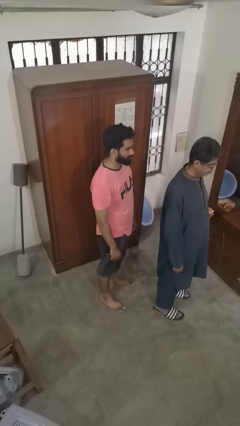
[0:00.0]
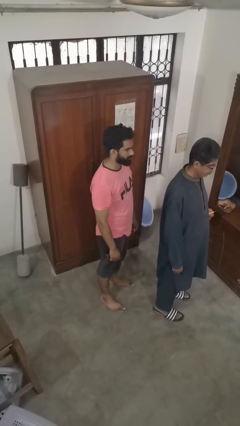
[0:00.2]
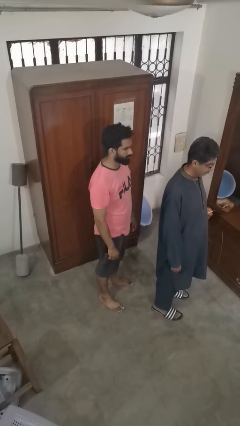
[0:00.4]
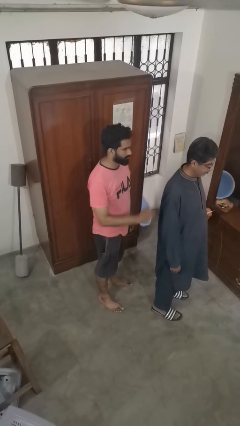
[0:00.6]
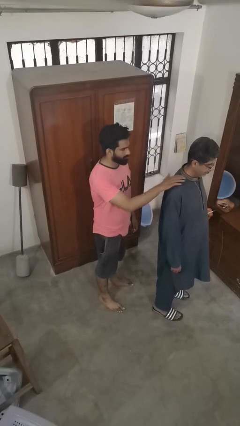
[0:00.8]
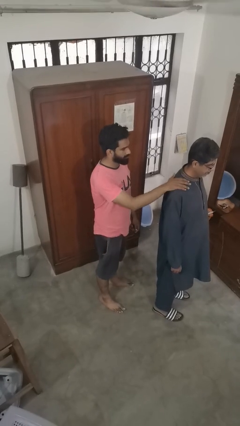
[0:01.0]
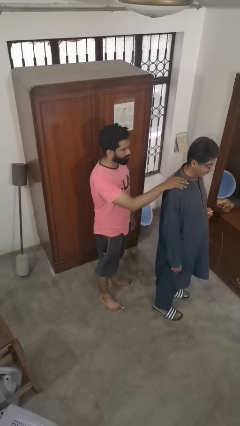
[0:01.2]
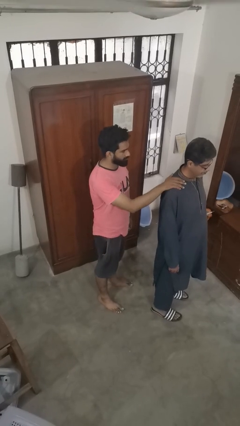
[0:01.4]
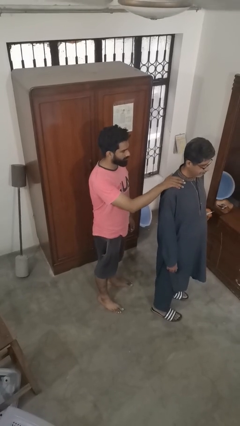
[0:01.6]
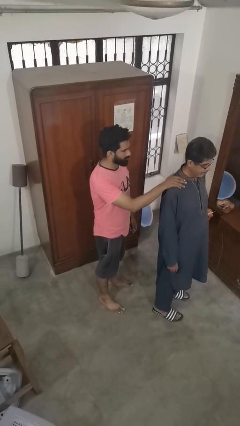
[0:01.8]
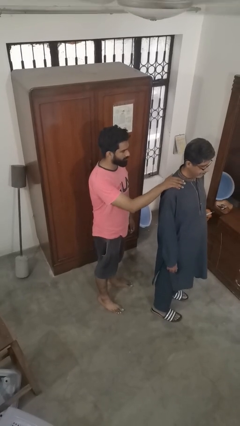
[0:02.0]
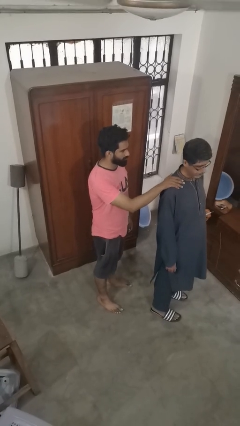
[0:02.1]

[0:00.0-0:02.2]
person grabs person by shoulder

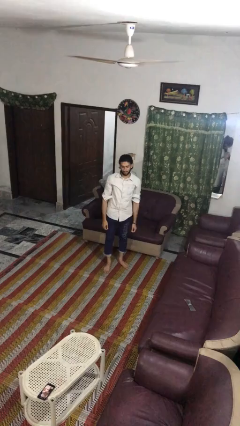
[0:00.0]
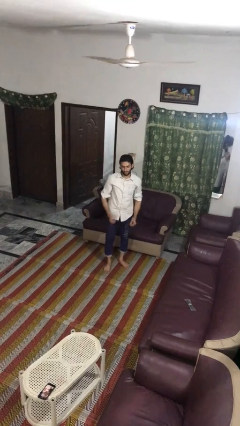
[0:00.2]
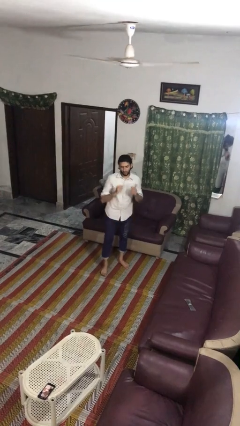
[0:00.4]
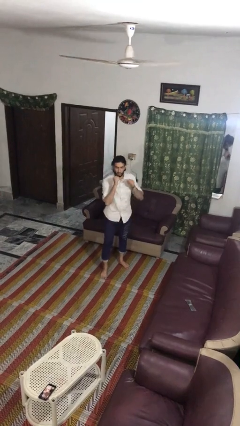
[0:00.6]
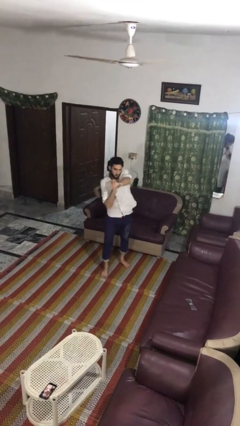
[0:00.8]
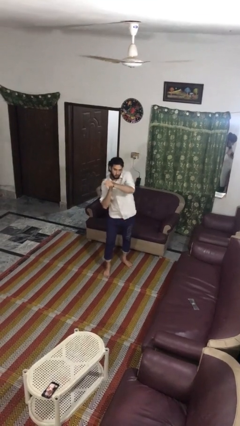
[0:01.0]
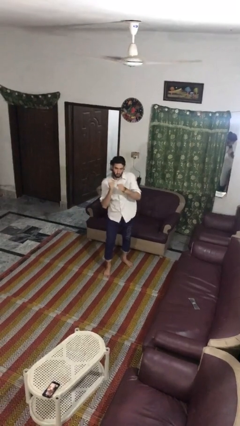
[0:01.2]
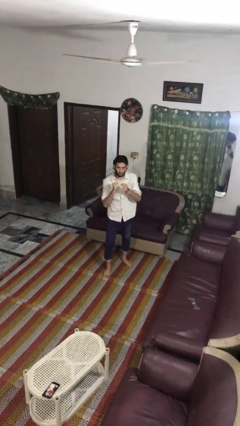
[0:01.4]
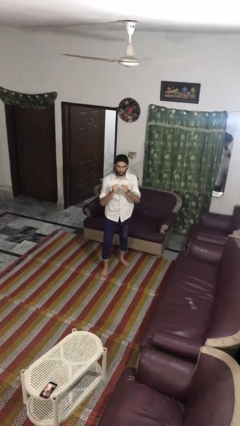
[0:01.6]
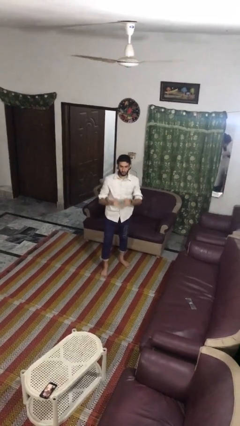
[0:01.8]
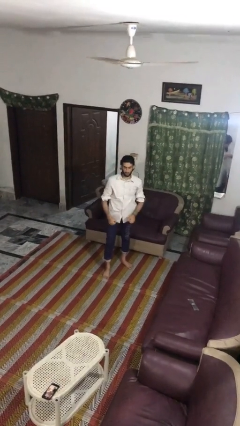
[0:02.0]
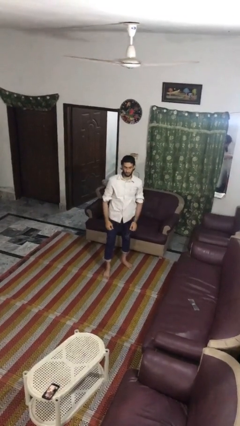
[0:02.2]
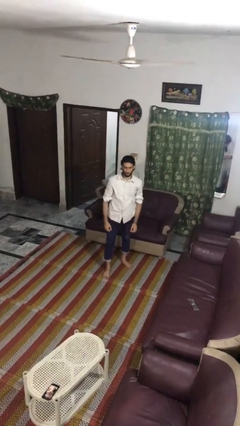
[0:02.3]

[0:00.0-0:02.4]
person punches

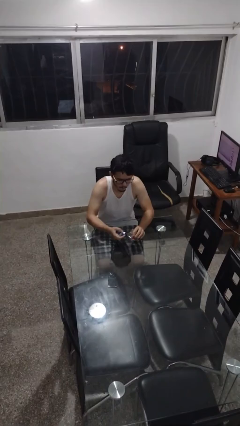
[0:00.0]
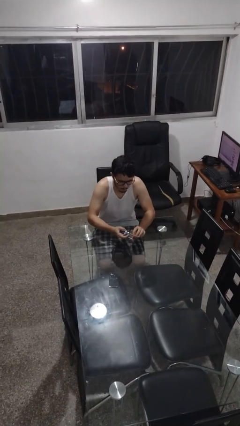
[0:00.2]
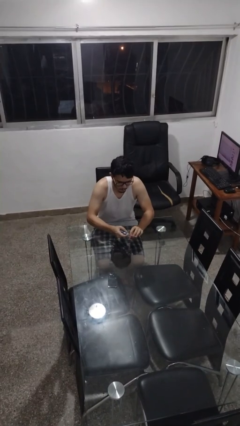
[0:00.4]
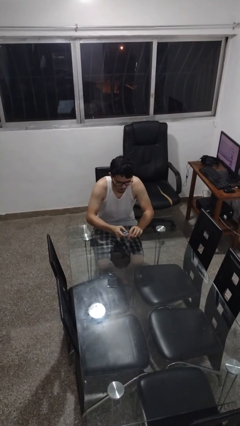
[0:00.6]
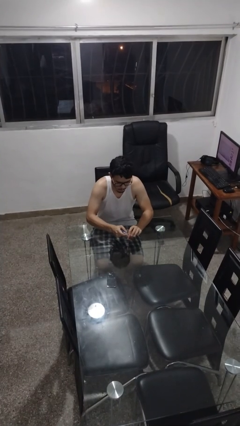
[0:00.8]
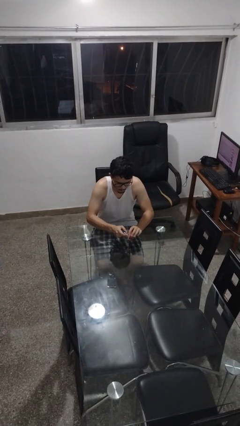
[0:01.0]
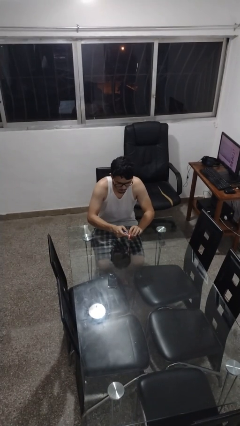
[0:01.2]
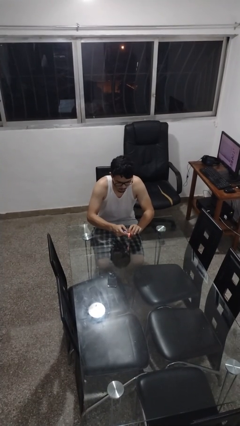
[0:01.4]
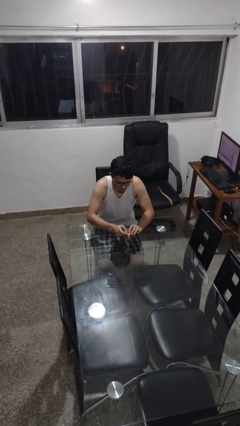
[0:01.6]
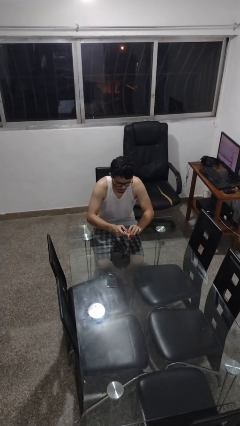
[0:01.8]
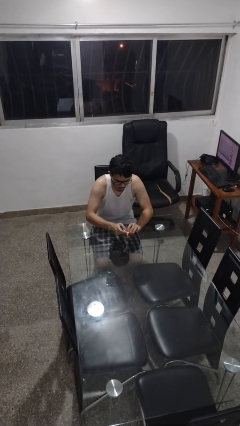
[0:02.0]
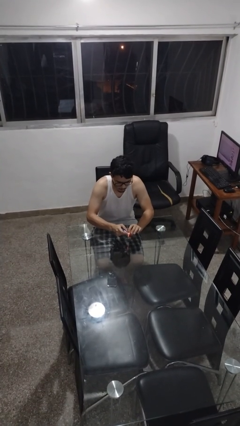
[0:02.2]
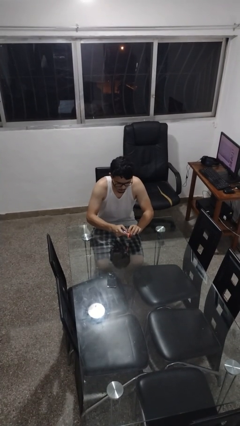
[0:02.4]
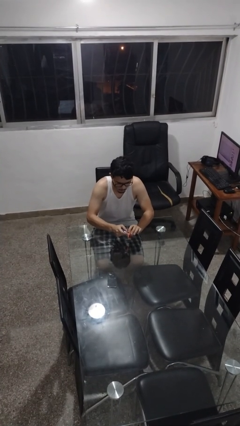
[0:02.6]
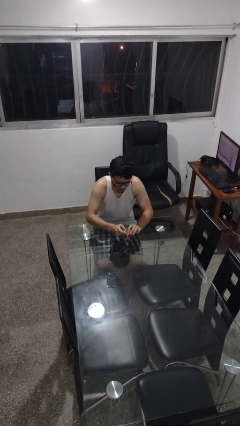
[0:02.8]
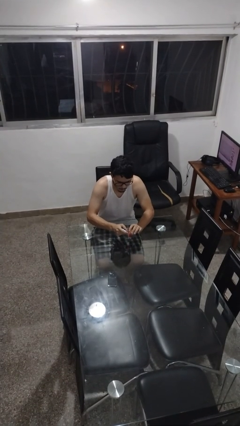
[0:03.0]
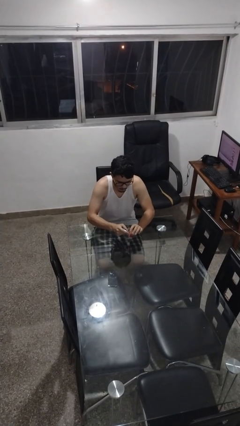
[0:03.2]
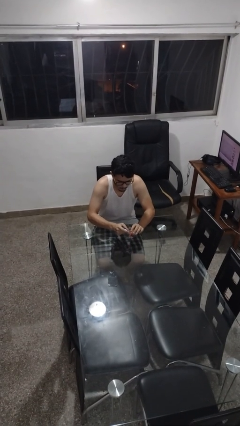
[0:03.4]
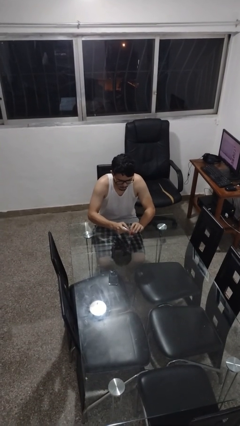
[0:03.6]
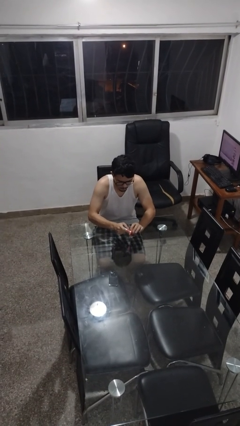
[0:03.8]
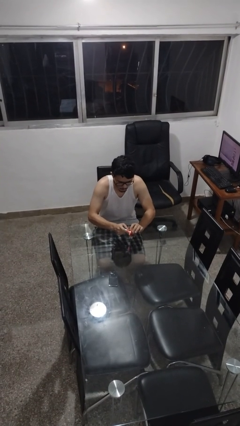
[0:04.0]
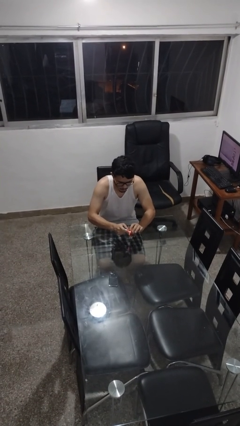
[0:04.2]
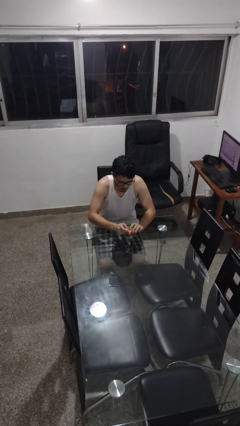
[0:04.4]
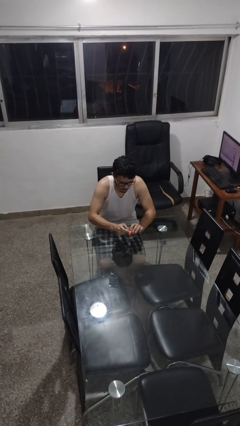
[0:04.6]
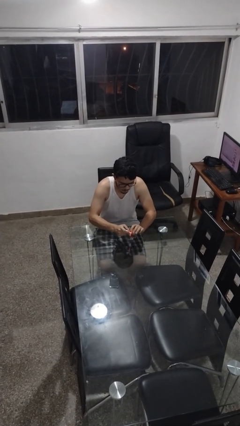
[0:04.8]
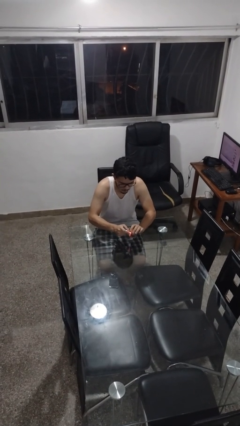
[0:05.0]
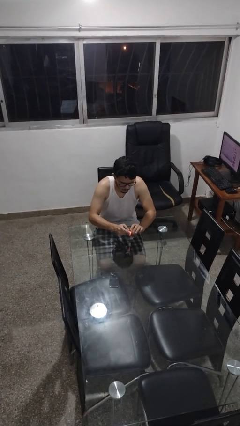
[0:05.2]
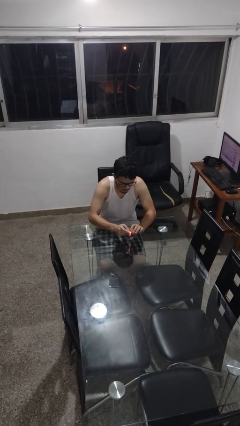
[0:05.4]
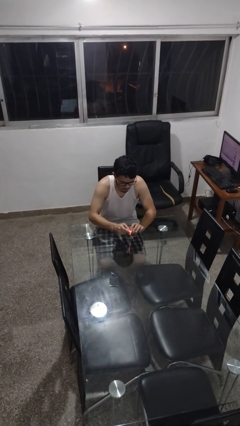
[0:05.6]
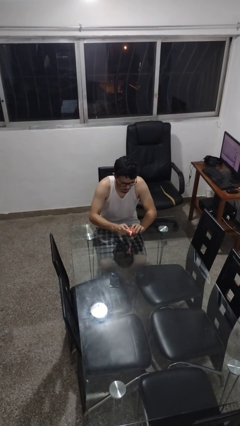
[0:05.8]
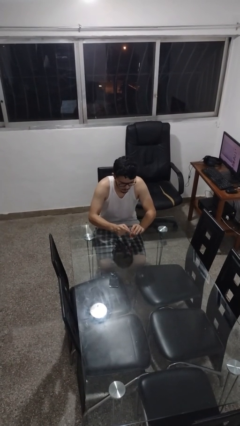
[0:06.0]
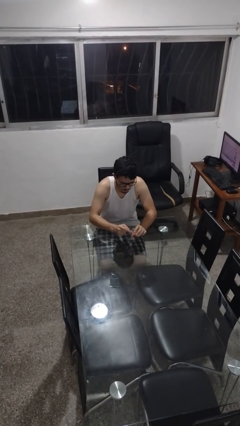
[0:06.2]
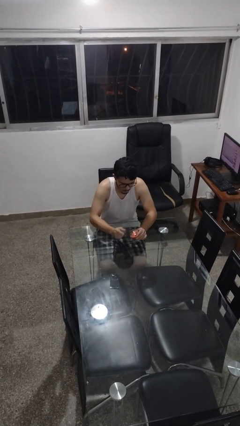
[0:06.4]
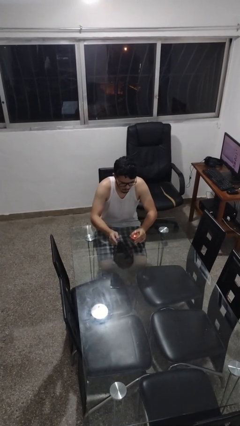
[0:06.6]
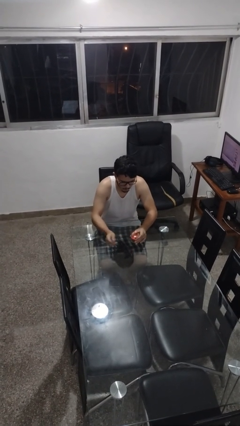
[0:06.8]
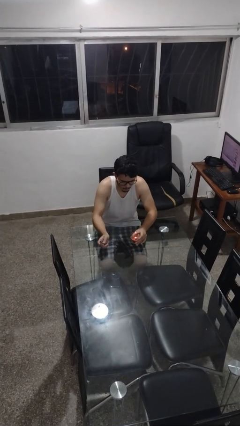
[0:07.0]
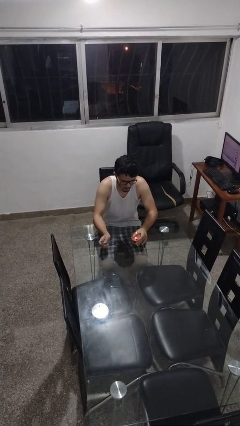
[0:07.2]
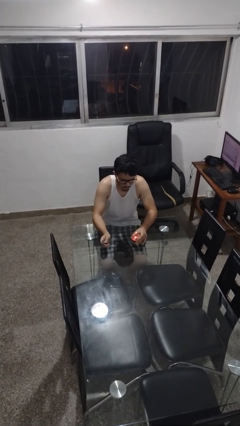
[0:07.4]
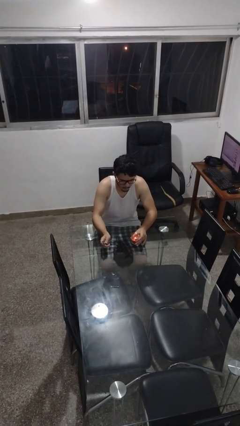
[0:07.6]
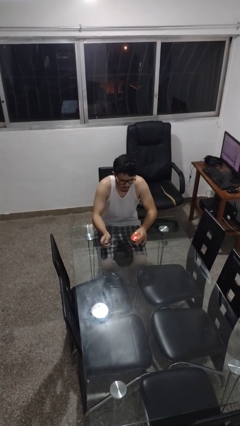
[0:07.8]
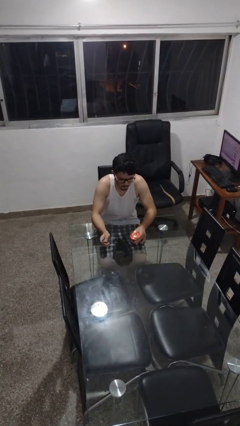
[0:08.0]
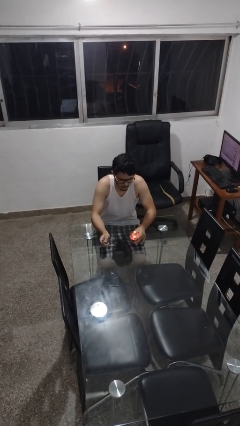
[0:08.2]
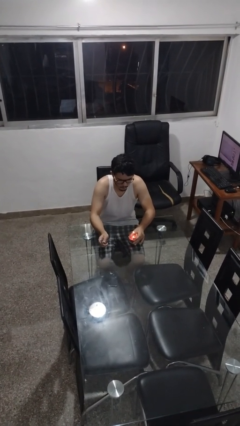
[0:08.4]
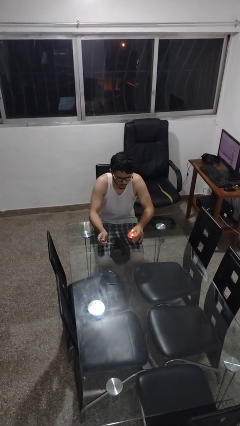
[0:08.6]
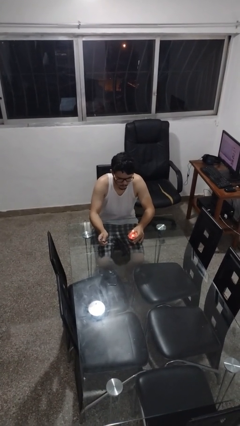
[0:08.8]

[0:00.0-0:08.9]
person lights candle

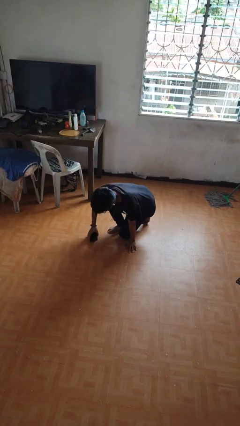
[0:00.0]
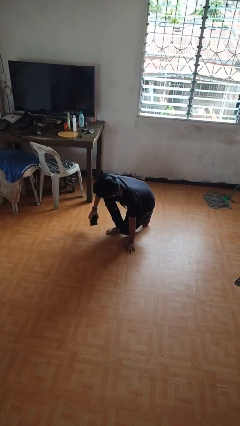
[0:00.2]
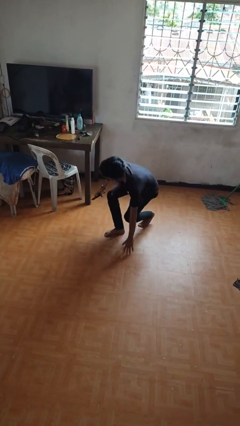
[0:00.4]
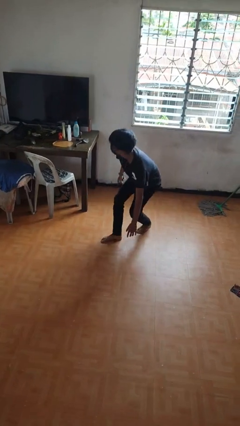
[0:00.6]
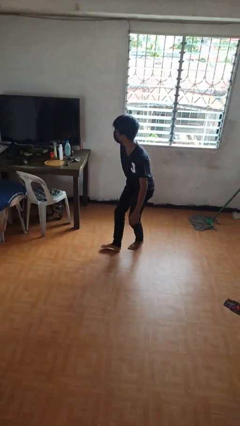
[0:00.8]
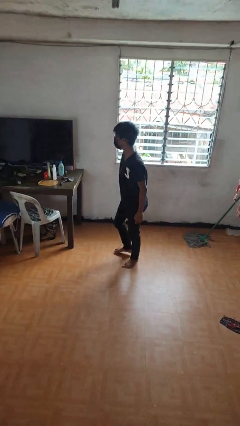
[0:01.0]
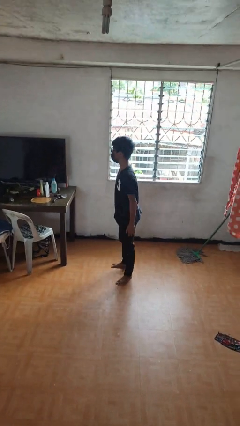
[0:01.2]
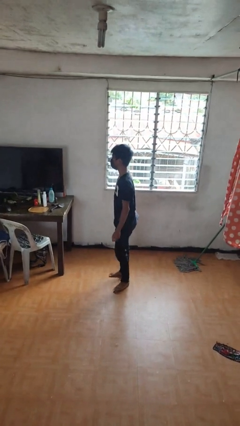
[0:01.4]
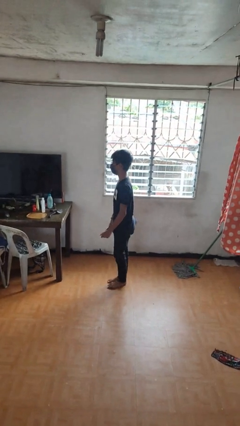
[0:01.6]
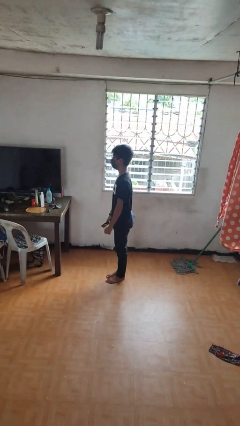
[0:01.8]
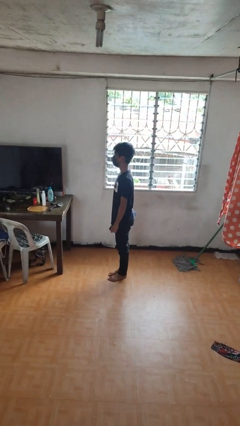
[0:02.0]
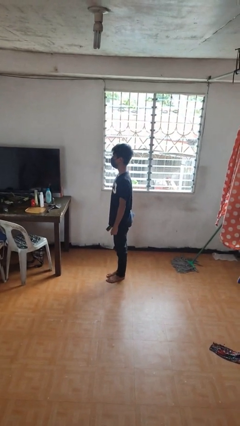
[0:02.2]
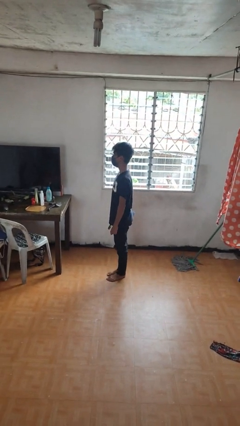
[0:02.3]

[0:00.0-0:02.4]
person stands up from floor

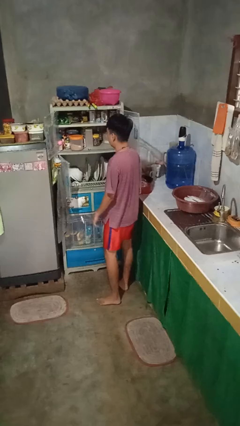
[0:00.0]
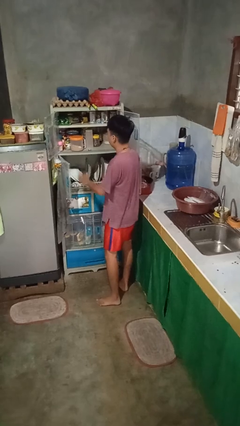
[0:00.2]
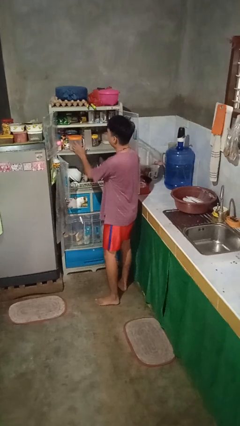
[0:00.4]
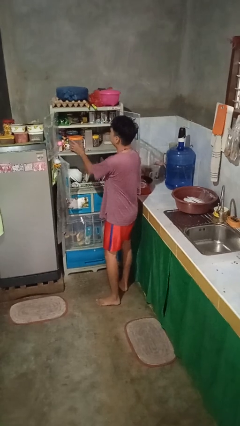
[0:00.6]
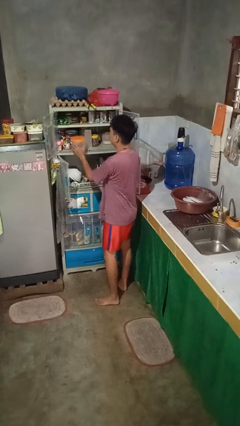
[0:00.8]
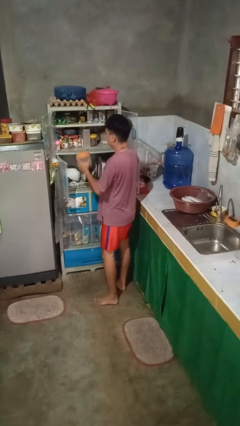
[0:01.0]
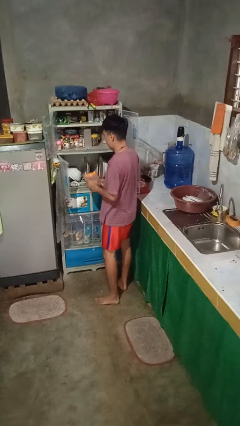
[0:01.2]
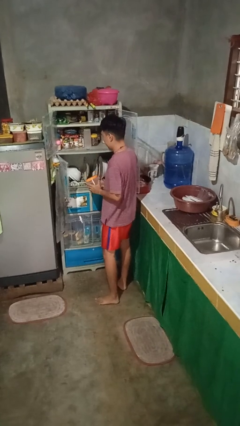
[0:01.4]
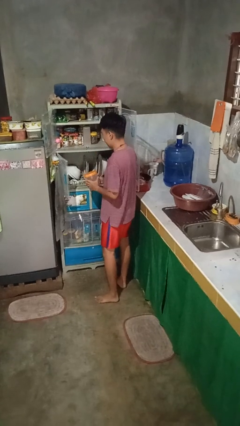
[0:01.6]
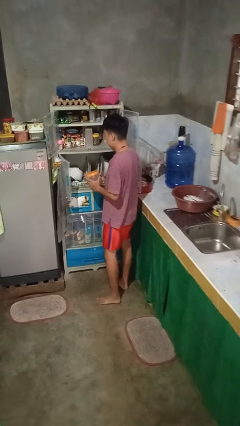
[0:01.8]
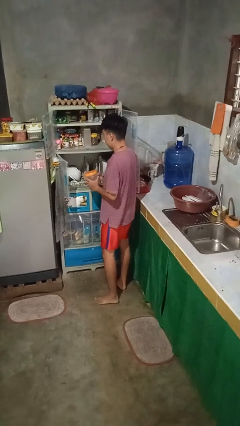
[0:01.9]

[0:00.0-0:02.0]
person takes object from cabinet
